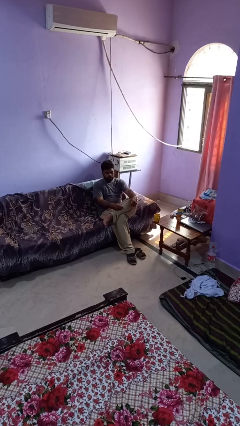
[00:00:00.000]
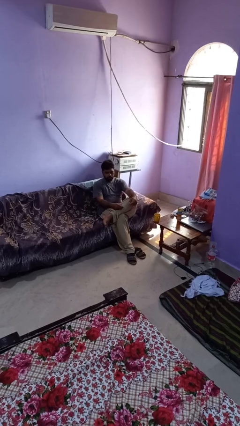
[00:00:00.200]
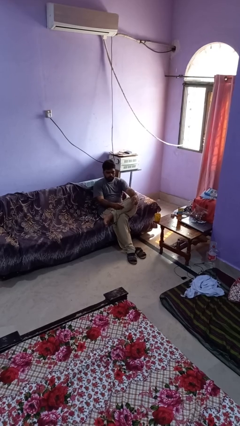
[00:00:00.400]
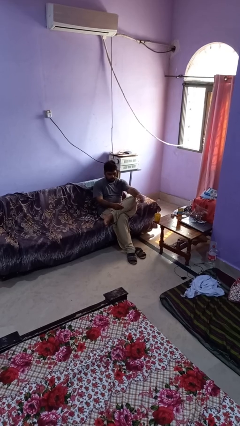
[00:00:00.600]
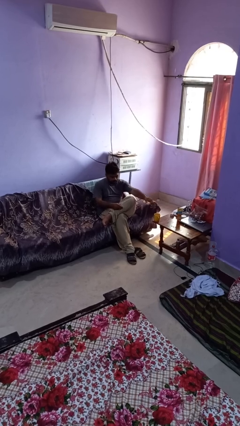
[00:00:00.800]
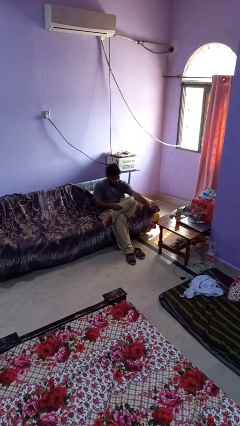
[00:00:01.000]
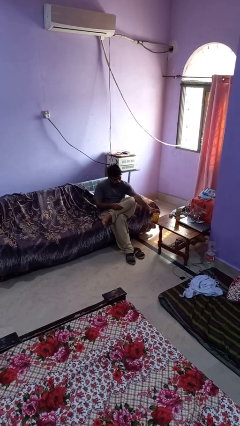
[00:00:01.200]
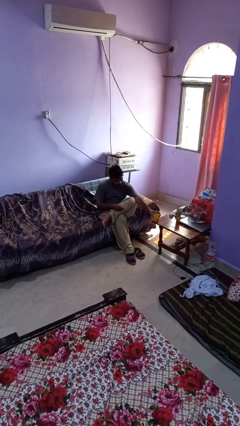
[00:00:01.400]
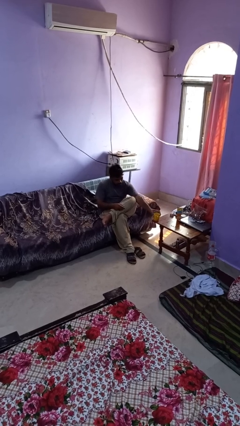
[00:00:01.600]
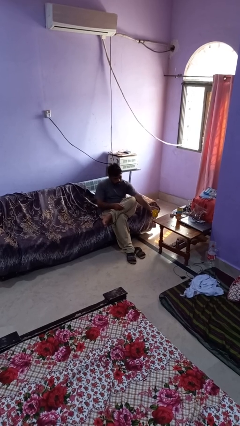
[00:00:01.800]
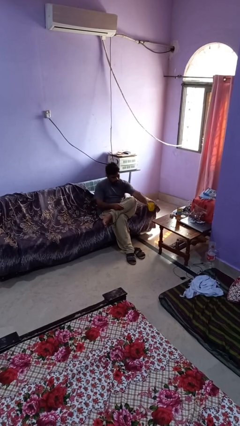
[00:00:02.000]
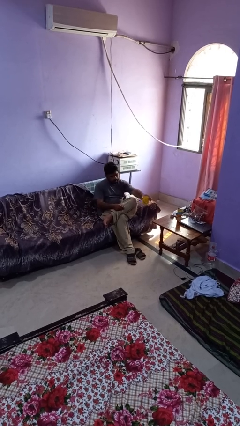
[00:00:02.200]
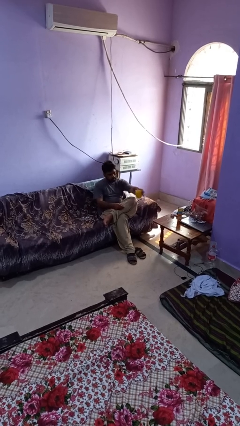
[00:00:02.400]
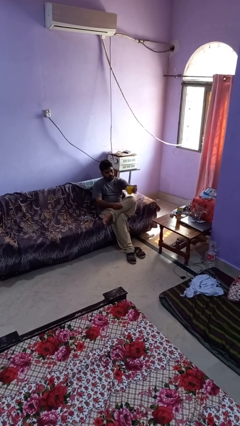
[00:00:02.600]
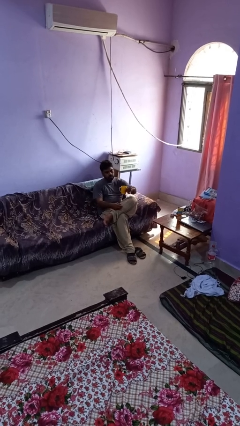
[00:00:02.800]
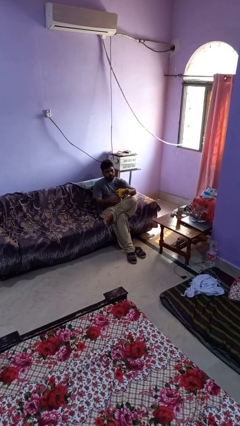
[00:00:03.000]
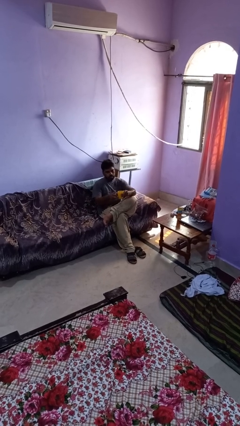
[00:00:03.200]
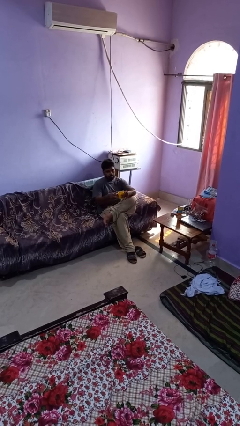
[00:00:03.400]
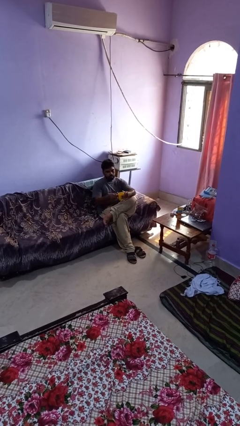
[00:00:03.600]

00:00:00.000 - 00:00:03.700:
person picks up object from table

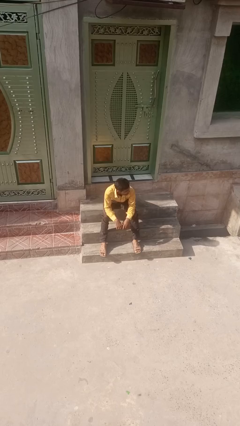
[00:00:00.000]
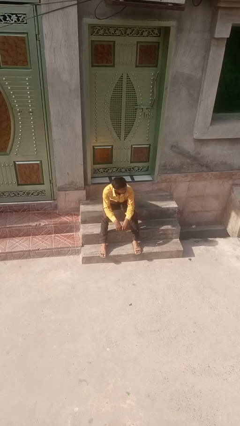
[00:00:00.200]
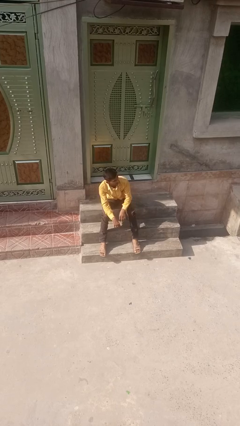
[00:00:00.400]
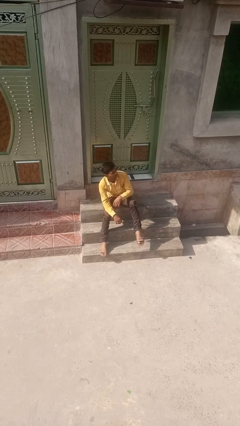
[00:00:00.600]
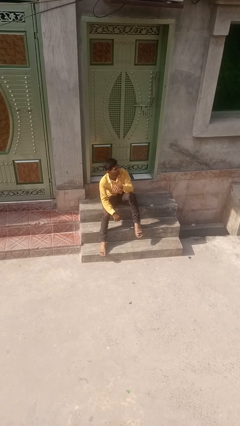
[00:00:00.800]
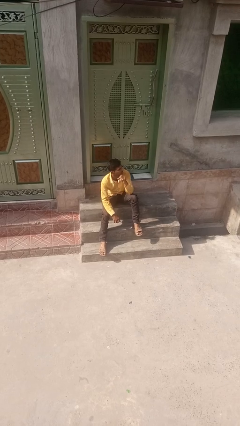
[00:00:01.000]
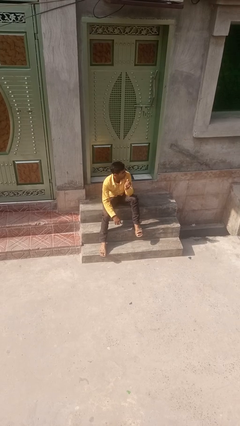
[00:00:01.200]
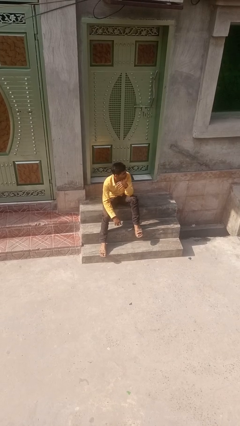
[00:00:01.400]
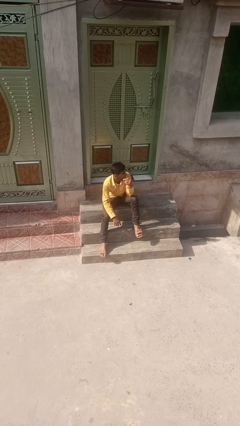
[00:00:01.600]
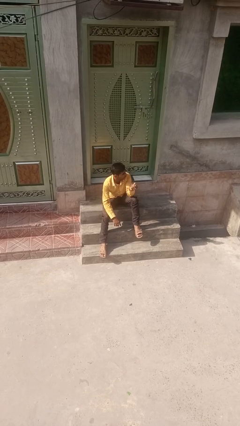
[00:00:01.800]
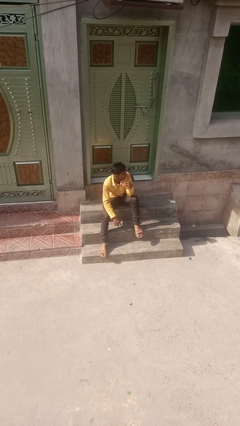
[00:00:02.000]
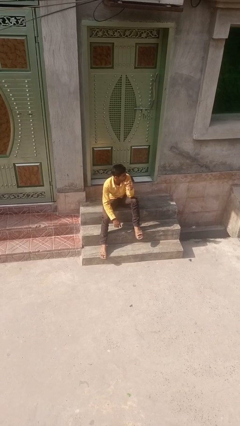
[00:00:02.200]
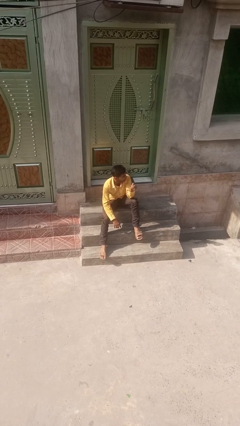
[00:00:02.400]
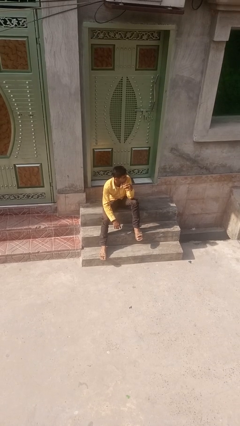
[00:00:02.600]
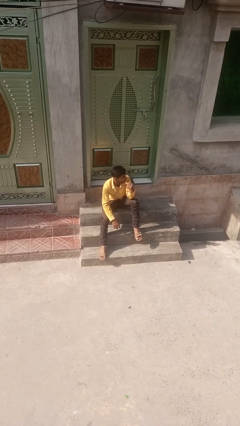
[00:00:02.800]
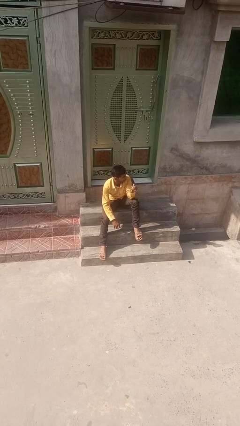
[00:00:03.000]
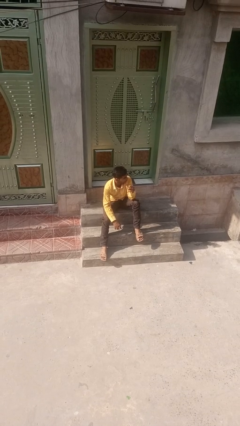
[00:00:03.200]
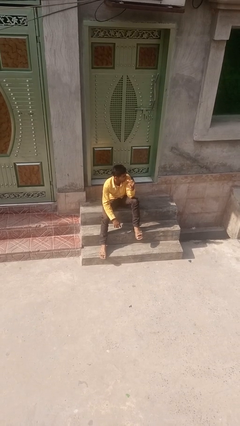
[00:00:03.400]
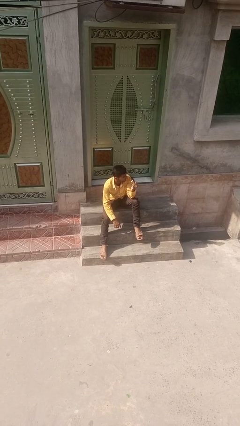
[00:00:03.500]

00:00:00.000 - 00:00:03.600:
person snaps fingers

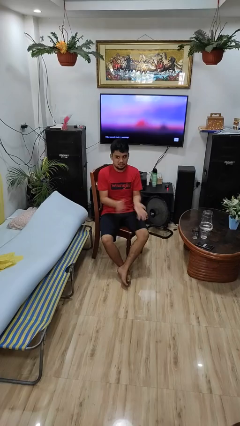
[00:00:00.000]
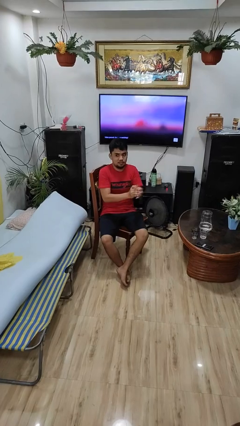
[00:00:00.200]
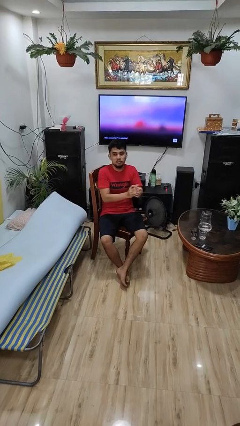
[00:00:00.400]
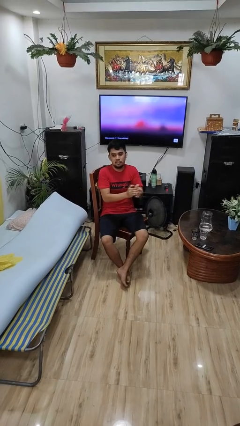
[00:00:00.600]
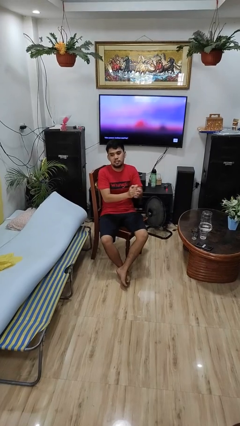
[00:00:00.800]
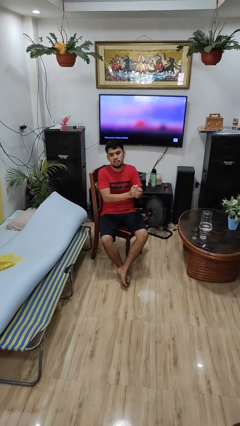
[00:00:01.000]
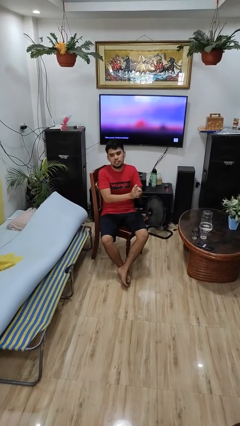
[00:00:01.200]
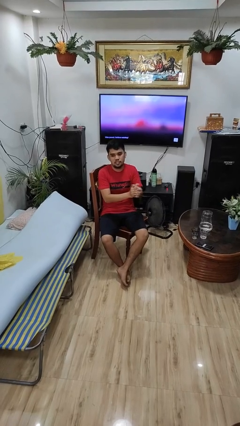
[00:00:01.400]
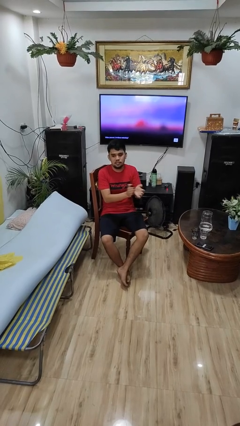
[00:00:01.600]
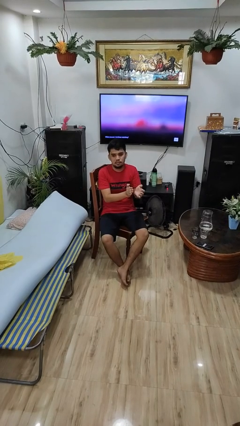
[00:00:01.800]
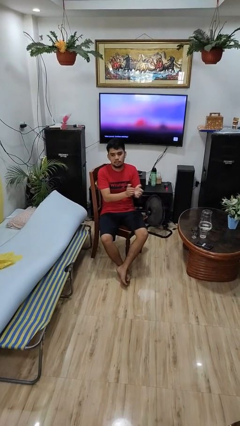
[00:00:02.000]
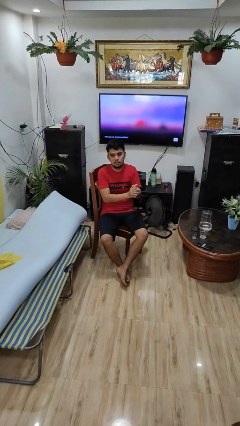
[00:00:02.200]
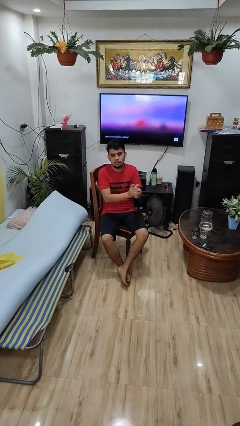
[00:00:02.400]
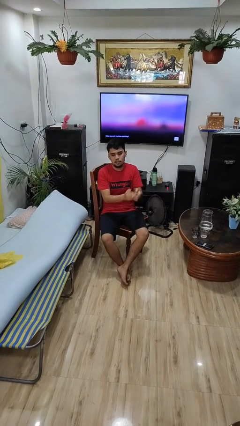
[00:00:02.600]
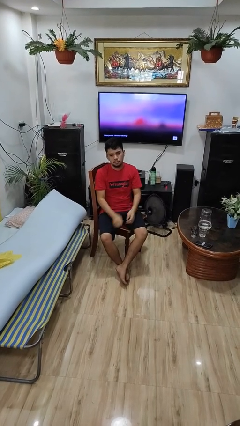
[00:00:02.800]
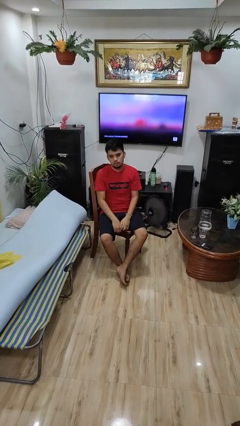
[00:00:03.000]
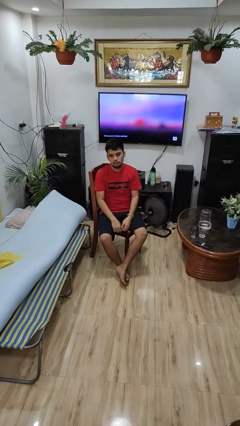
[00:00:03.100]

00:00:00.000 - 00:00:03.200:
person claps hands

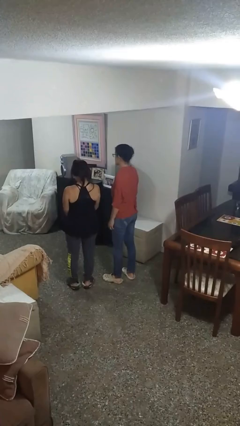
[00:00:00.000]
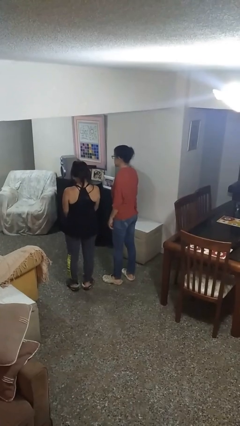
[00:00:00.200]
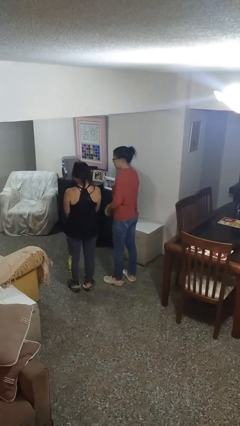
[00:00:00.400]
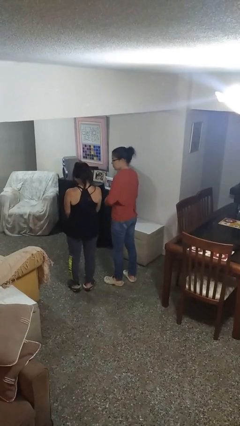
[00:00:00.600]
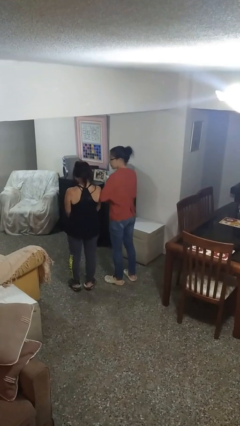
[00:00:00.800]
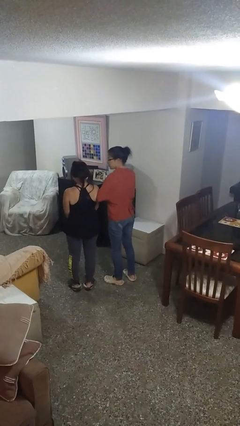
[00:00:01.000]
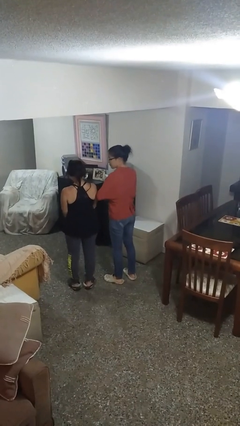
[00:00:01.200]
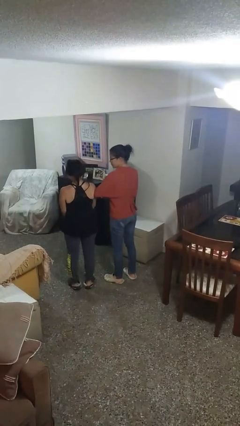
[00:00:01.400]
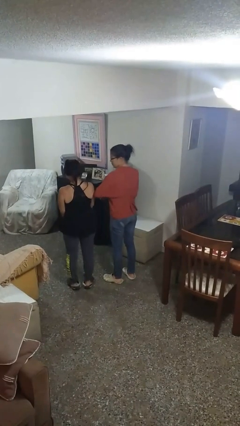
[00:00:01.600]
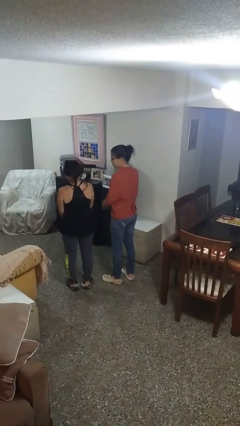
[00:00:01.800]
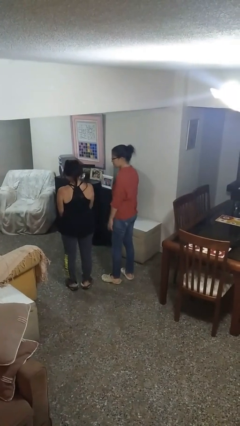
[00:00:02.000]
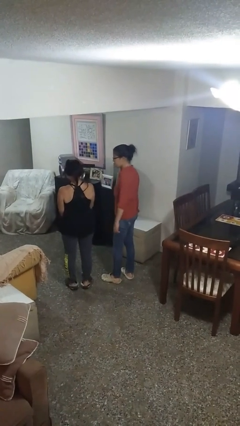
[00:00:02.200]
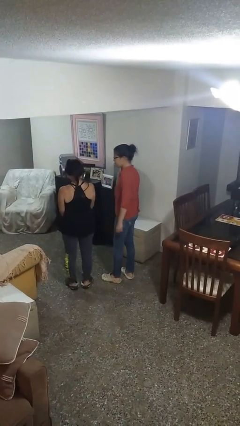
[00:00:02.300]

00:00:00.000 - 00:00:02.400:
person nudges person with elbow

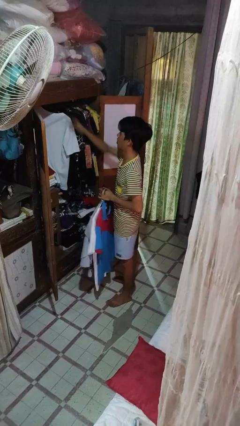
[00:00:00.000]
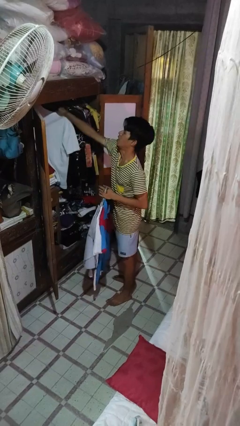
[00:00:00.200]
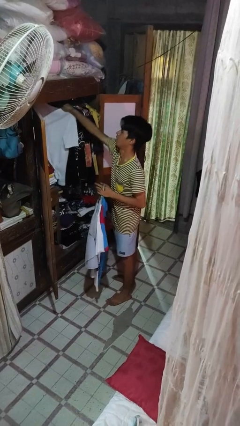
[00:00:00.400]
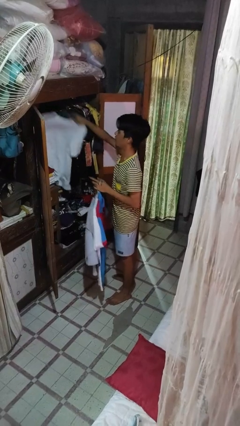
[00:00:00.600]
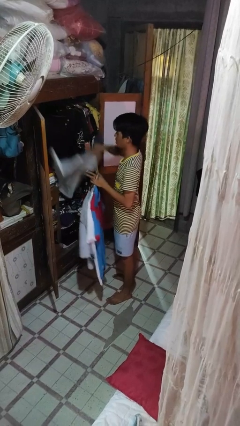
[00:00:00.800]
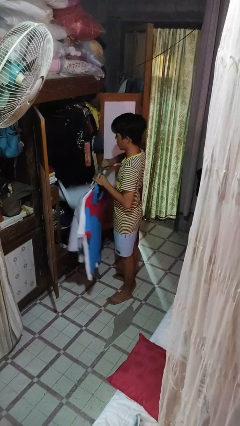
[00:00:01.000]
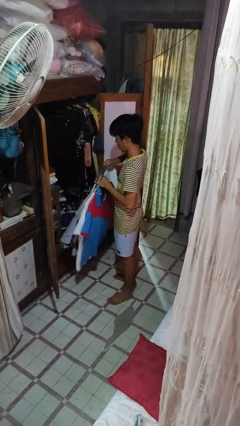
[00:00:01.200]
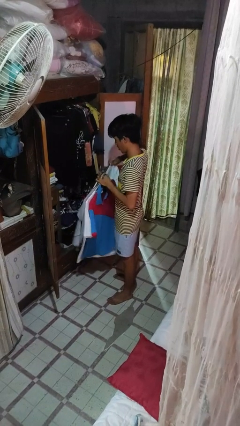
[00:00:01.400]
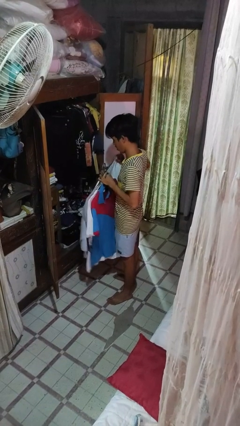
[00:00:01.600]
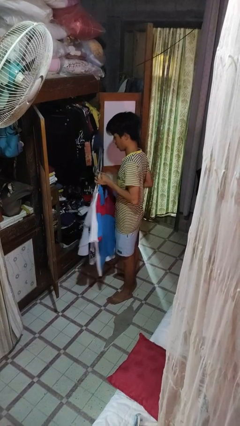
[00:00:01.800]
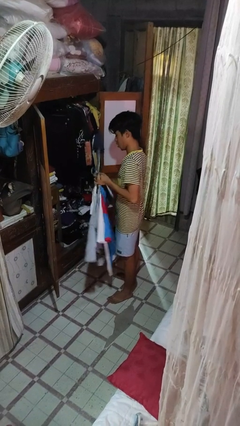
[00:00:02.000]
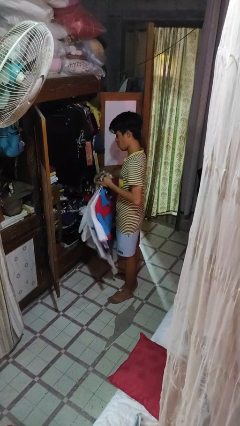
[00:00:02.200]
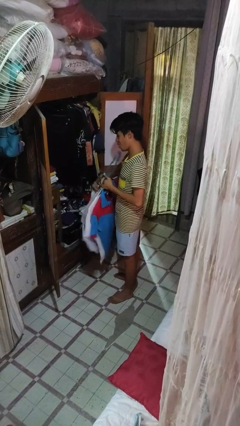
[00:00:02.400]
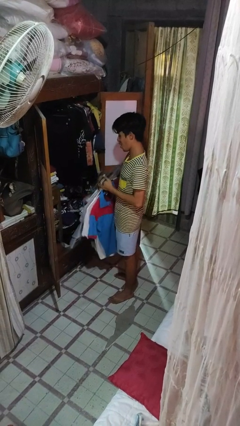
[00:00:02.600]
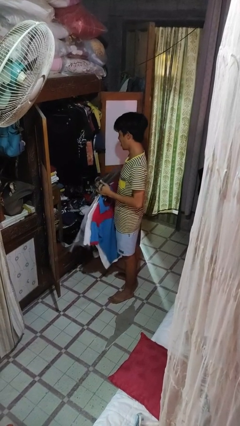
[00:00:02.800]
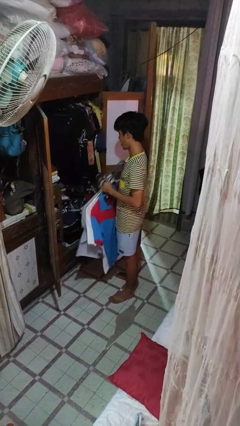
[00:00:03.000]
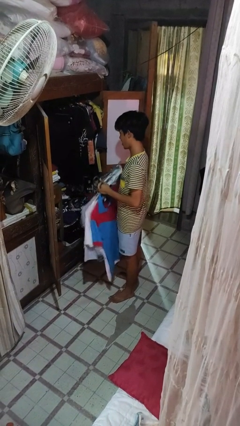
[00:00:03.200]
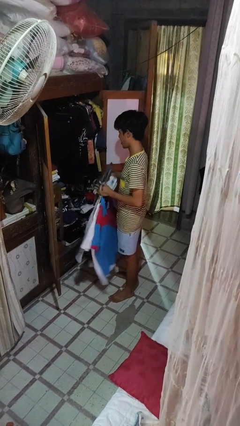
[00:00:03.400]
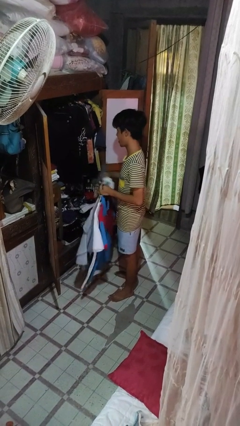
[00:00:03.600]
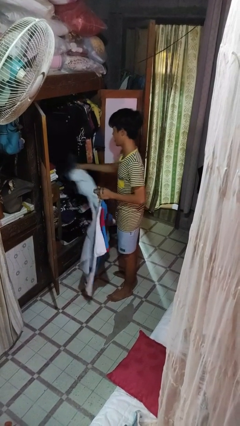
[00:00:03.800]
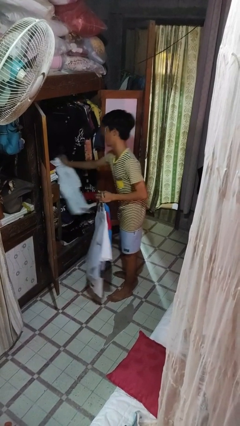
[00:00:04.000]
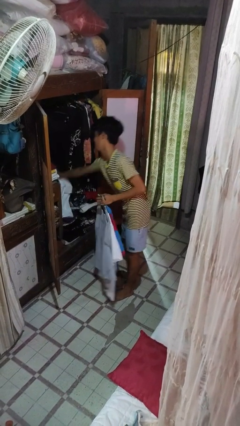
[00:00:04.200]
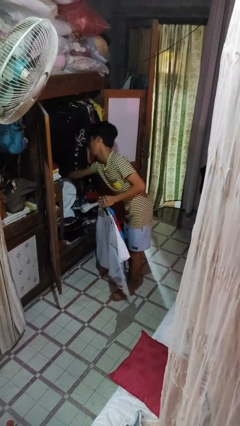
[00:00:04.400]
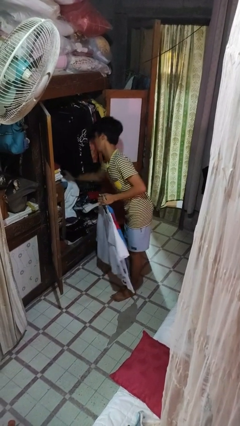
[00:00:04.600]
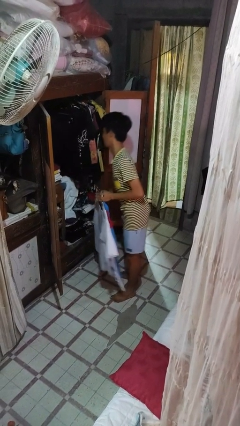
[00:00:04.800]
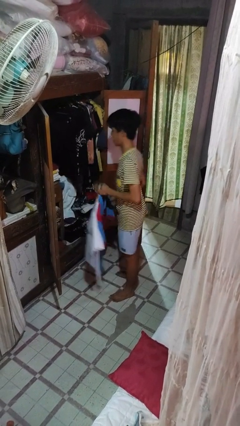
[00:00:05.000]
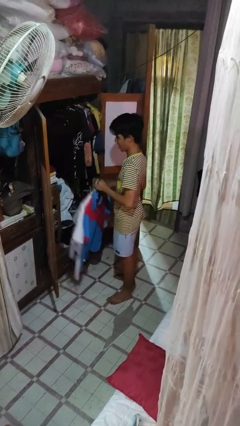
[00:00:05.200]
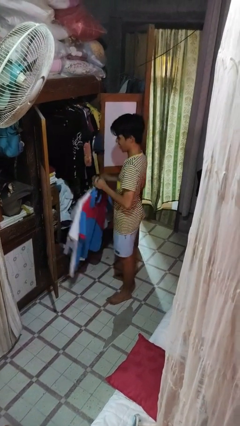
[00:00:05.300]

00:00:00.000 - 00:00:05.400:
person takes clothes from closet
